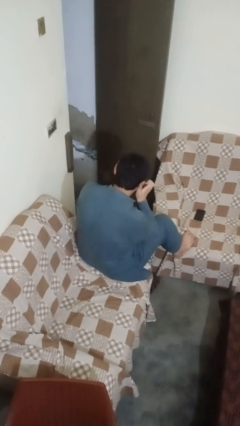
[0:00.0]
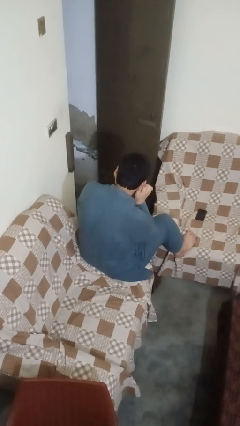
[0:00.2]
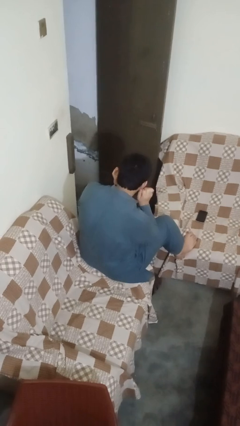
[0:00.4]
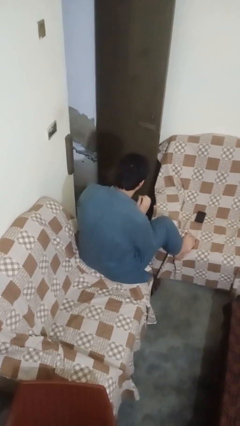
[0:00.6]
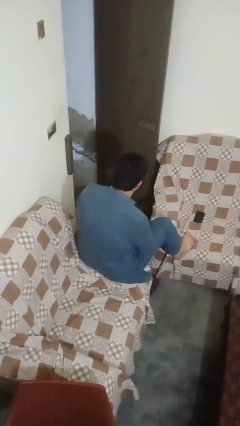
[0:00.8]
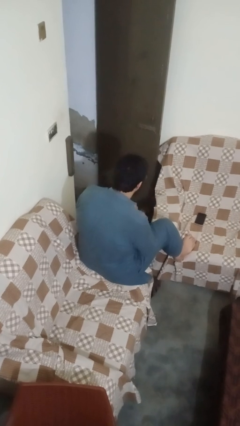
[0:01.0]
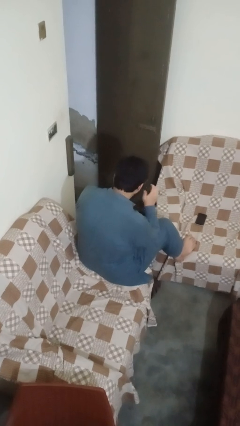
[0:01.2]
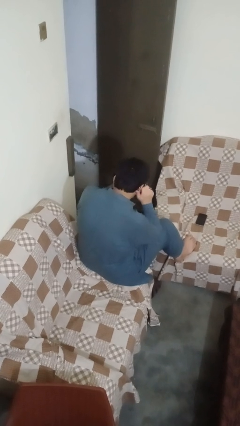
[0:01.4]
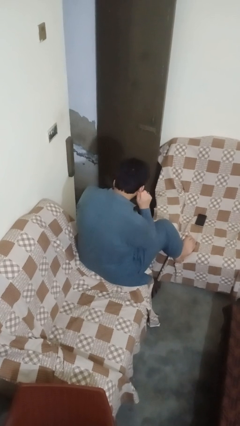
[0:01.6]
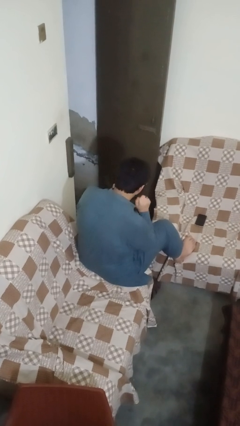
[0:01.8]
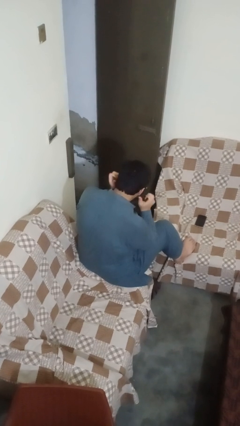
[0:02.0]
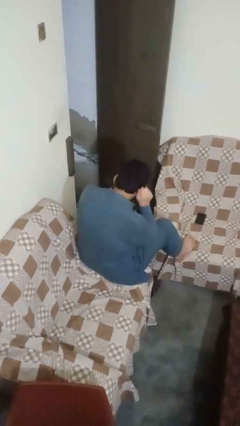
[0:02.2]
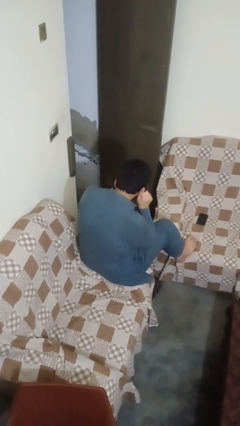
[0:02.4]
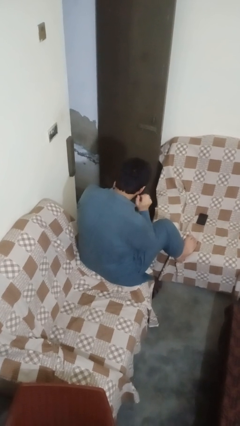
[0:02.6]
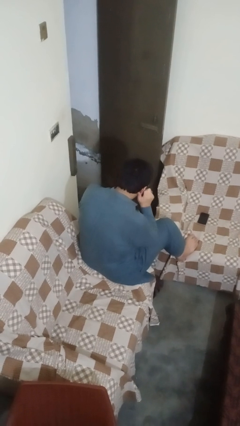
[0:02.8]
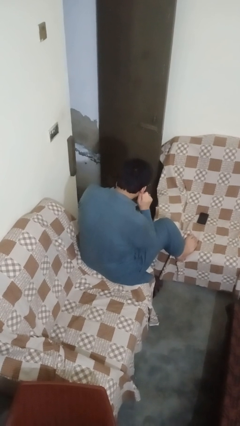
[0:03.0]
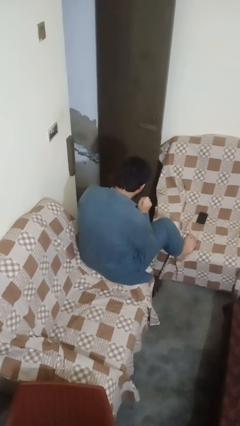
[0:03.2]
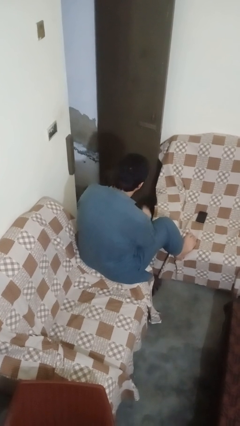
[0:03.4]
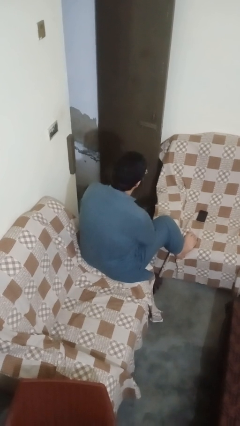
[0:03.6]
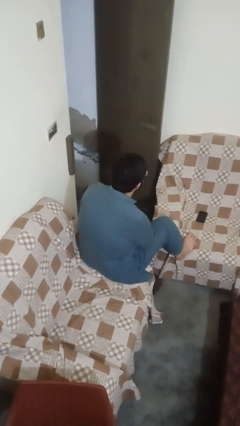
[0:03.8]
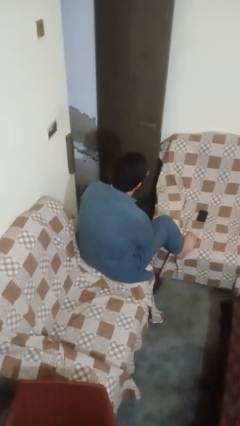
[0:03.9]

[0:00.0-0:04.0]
person touches earlobe

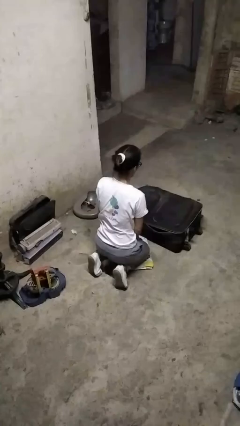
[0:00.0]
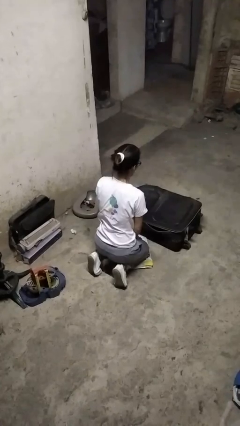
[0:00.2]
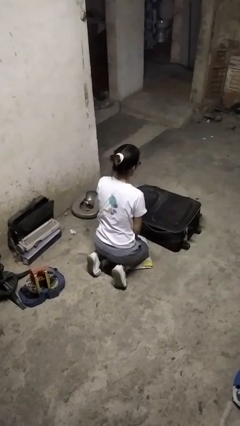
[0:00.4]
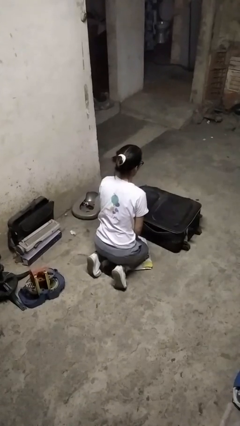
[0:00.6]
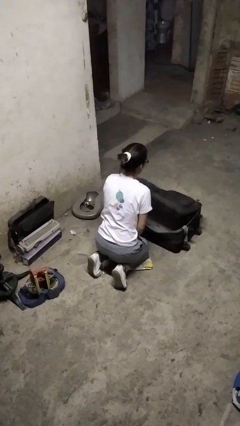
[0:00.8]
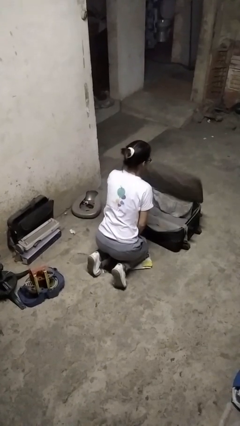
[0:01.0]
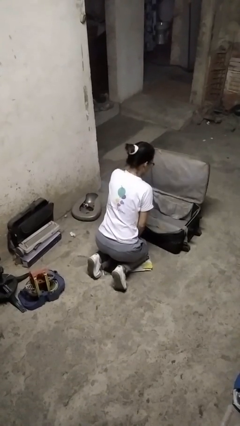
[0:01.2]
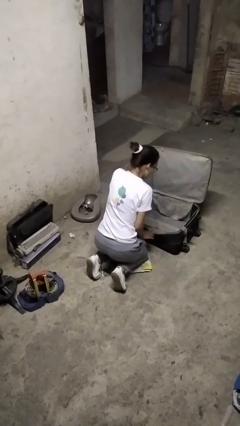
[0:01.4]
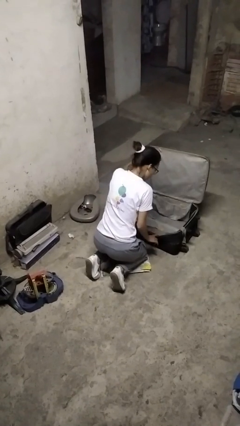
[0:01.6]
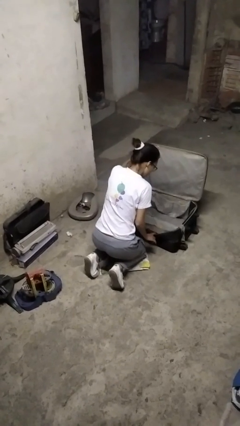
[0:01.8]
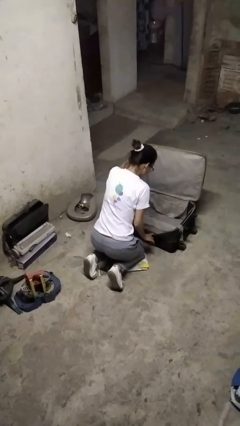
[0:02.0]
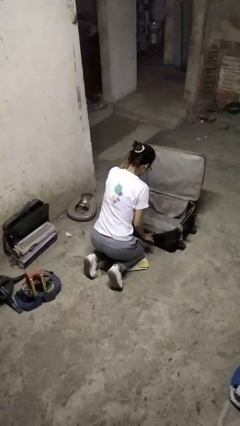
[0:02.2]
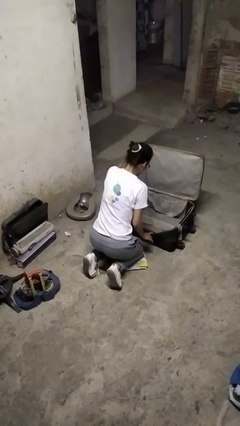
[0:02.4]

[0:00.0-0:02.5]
person opens suitcase

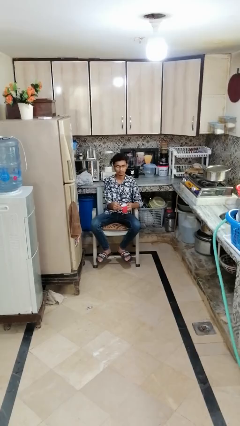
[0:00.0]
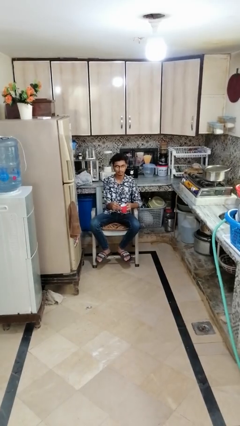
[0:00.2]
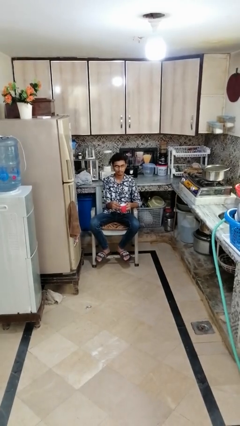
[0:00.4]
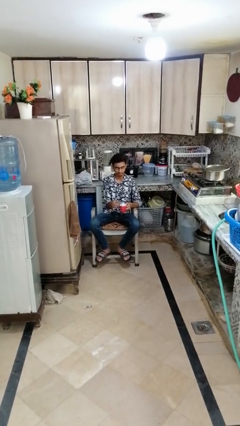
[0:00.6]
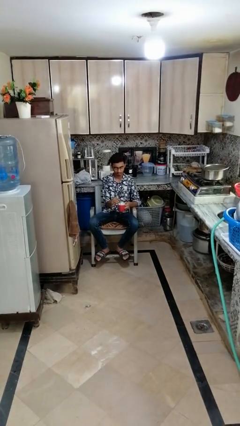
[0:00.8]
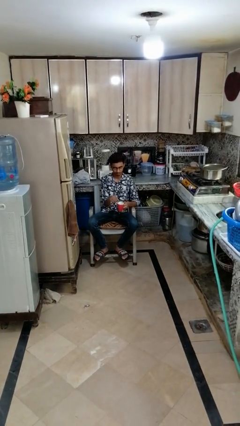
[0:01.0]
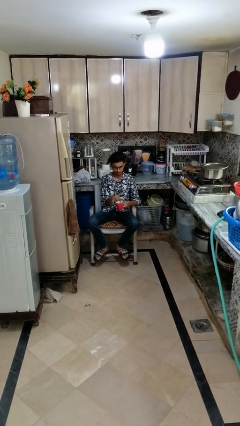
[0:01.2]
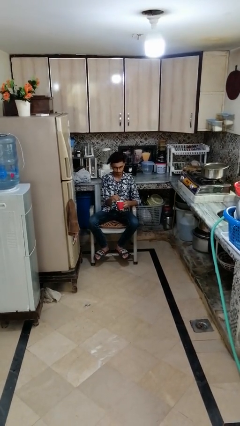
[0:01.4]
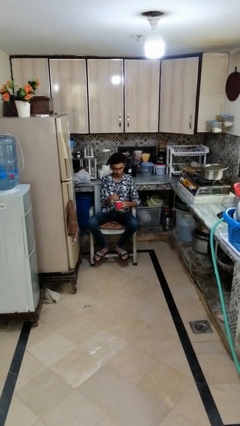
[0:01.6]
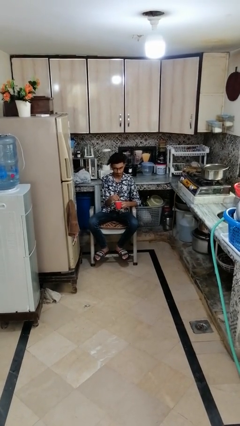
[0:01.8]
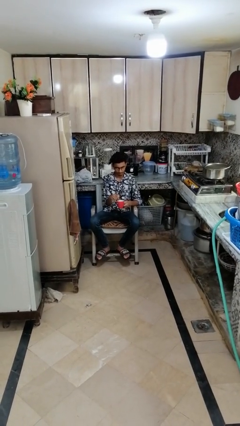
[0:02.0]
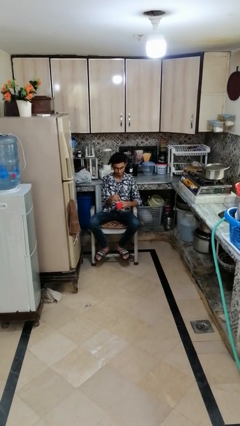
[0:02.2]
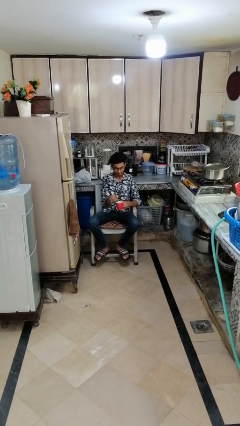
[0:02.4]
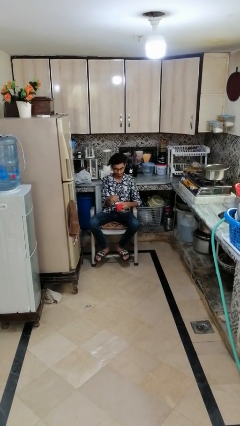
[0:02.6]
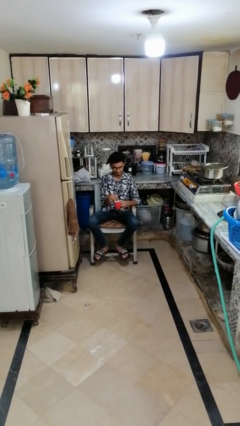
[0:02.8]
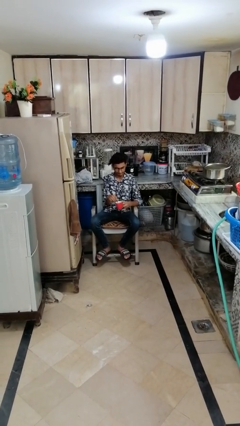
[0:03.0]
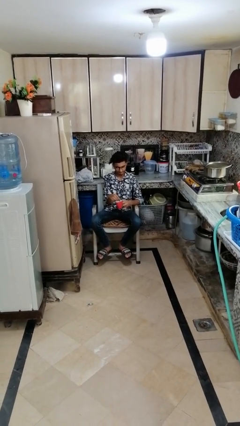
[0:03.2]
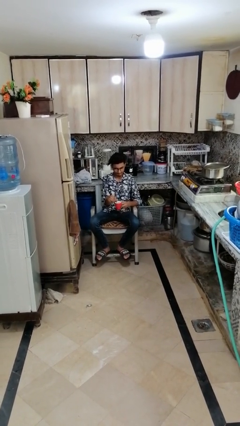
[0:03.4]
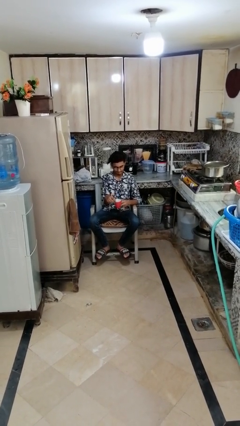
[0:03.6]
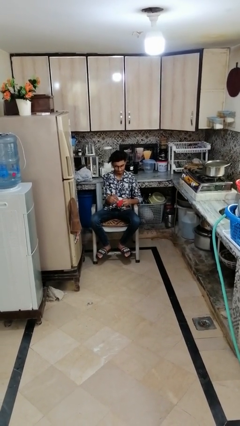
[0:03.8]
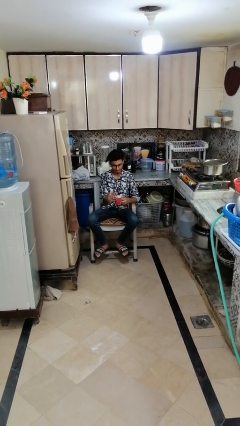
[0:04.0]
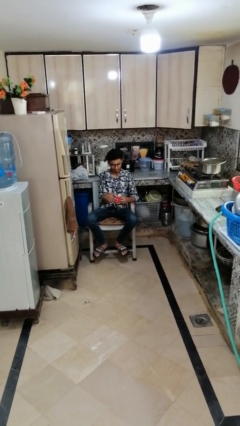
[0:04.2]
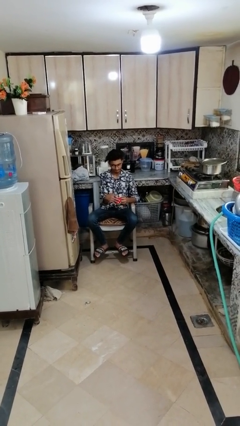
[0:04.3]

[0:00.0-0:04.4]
person stirs mug

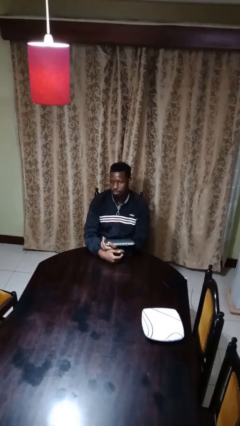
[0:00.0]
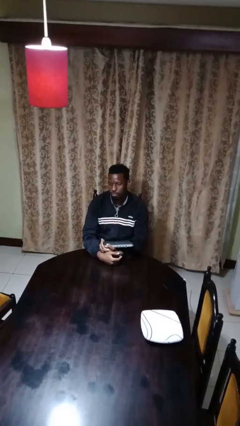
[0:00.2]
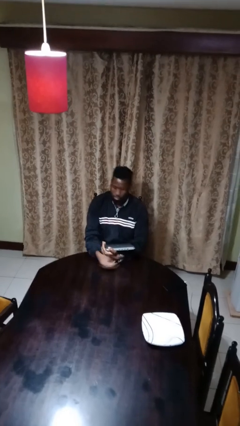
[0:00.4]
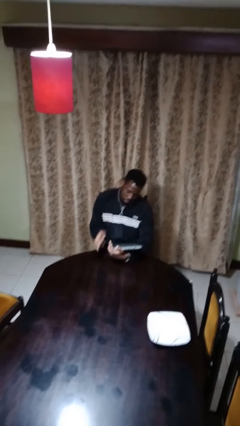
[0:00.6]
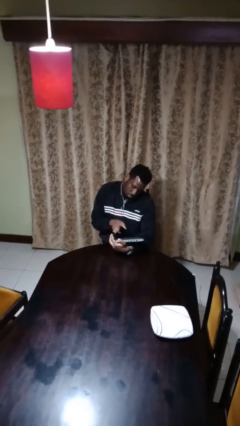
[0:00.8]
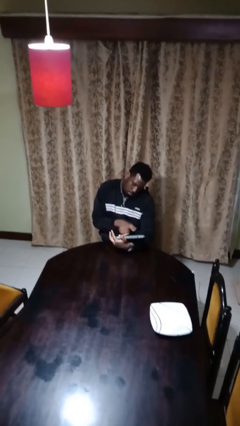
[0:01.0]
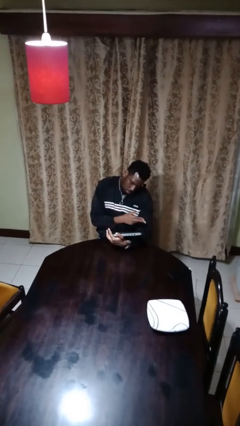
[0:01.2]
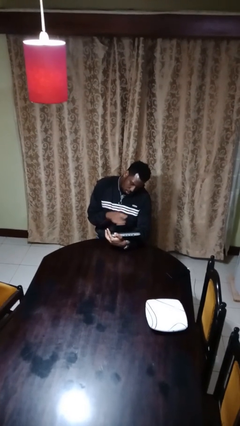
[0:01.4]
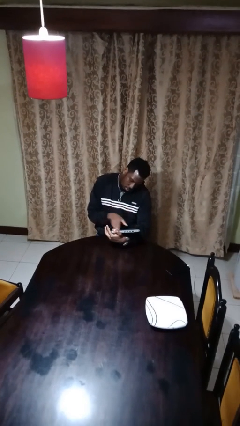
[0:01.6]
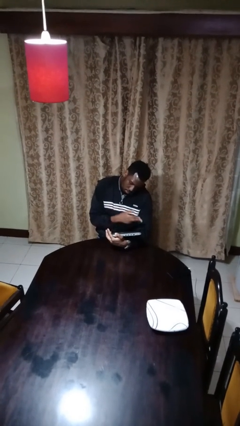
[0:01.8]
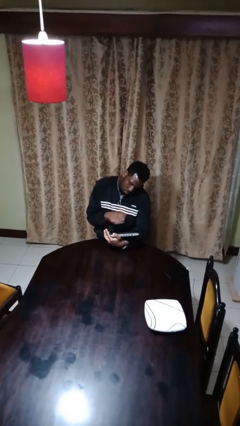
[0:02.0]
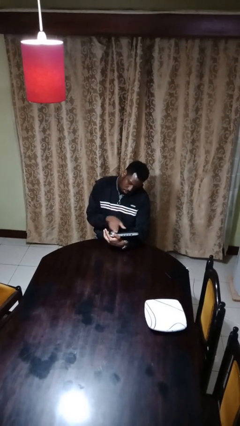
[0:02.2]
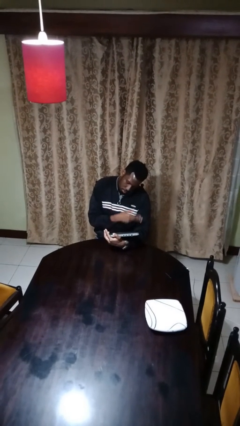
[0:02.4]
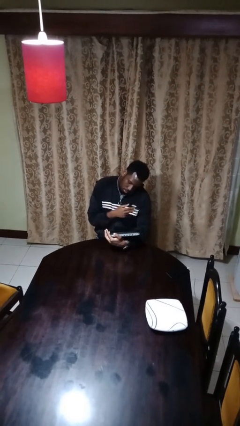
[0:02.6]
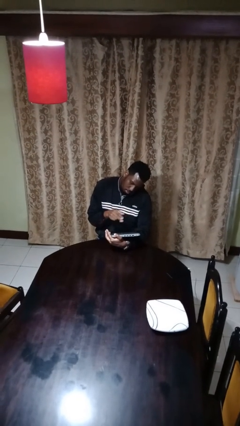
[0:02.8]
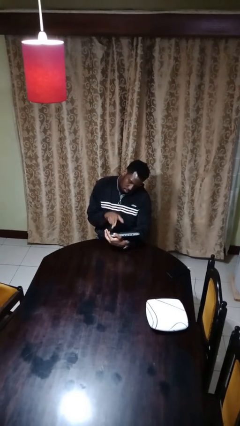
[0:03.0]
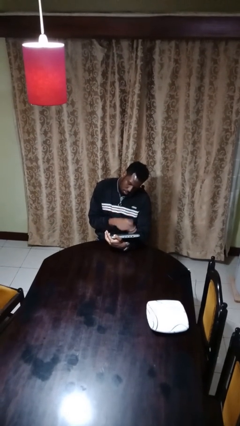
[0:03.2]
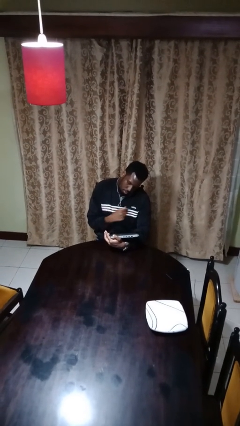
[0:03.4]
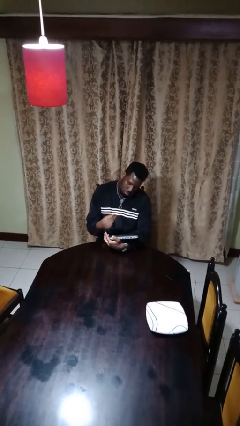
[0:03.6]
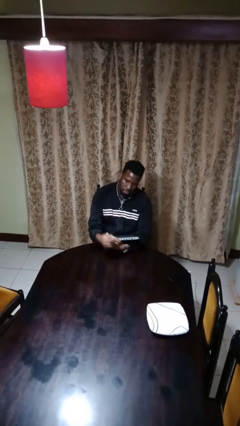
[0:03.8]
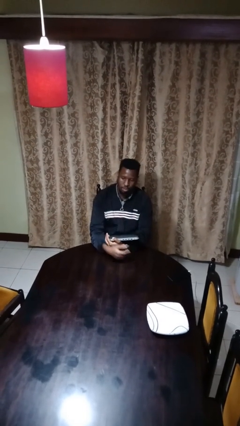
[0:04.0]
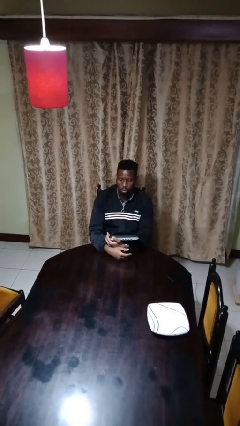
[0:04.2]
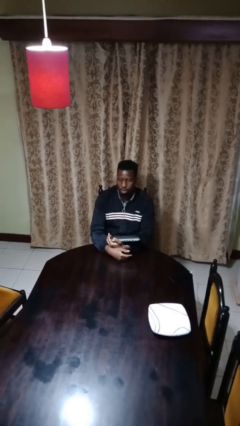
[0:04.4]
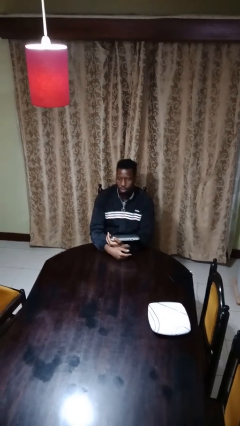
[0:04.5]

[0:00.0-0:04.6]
person interacts with tablet

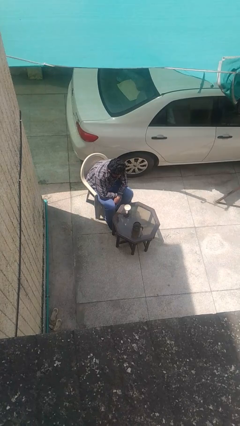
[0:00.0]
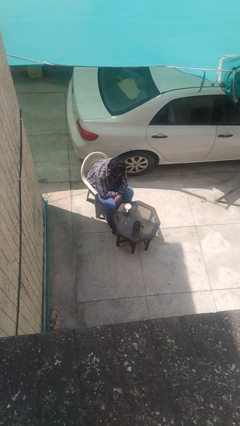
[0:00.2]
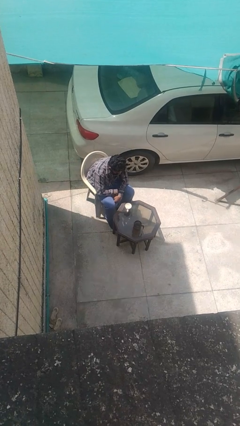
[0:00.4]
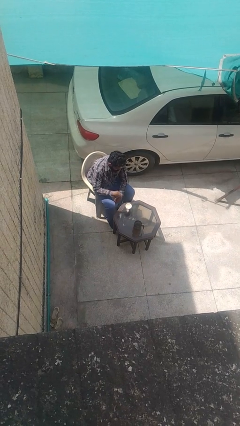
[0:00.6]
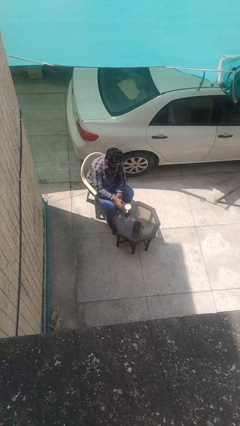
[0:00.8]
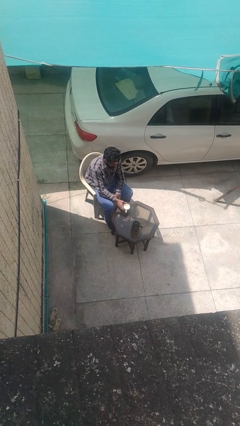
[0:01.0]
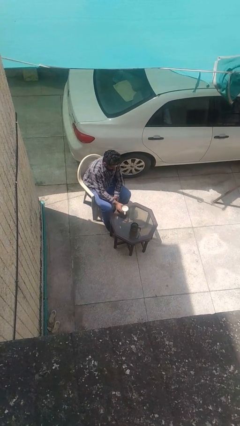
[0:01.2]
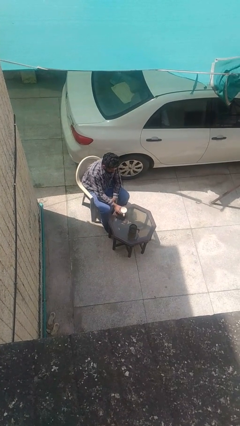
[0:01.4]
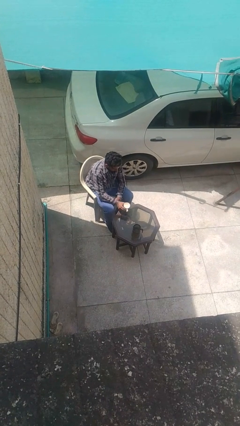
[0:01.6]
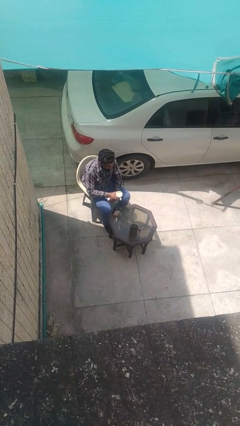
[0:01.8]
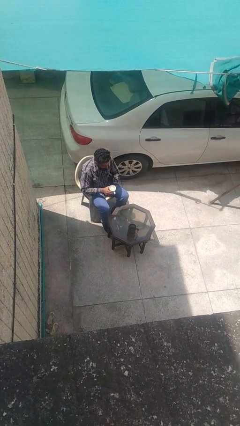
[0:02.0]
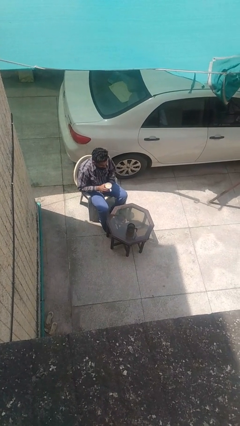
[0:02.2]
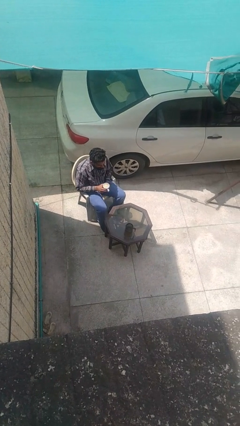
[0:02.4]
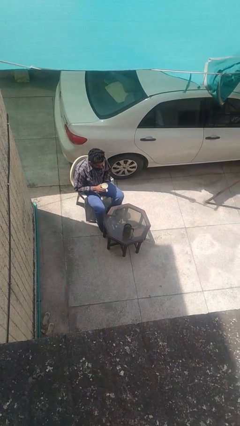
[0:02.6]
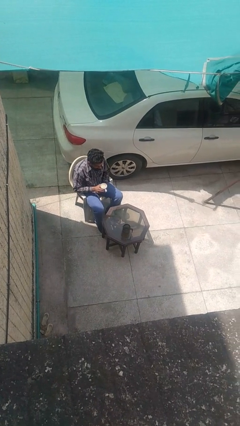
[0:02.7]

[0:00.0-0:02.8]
person picks up object from table
